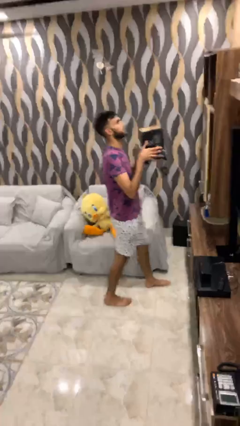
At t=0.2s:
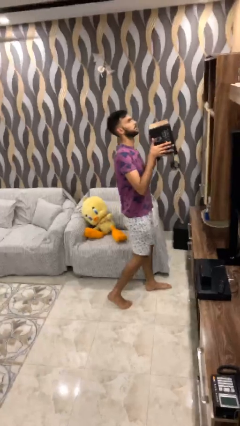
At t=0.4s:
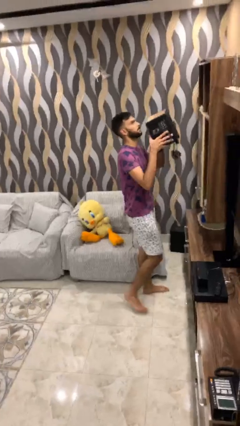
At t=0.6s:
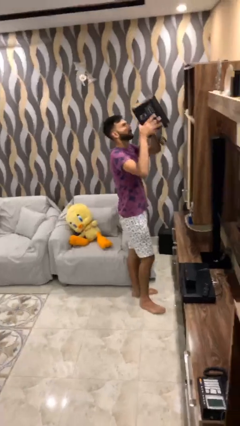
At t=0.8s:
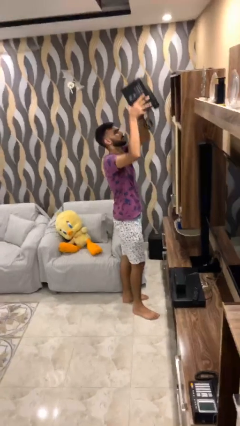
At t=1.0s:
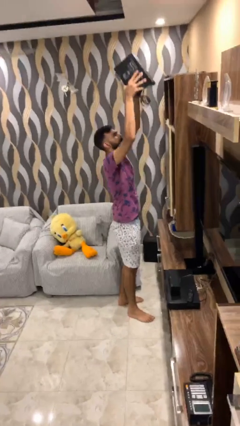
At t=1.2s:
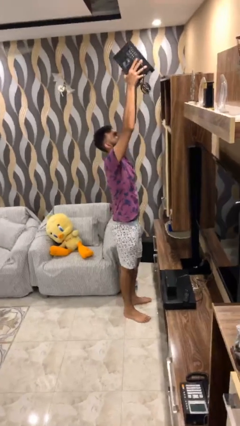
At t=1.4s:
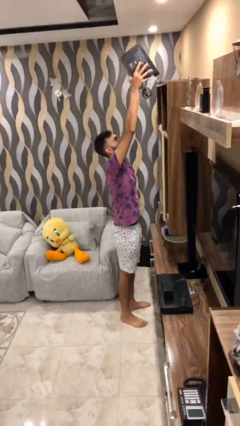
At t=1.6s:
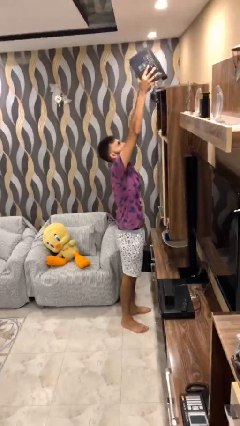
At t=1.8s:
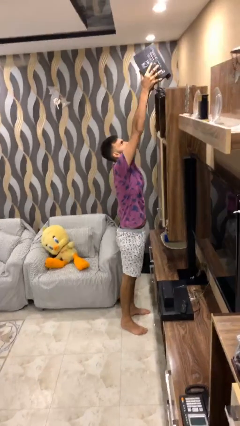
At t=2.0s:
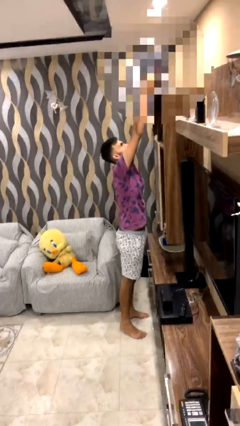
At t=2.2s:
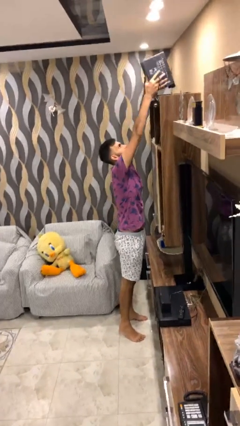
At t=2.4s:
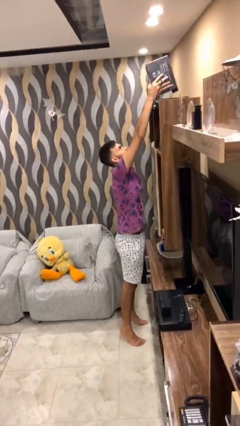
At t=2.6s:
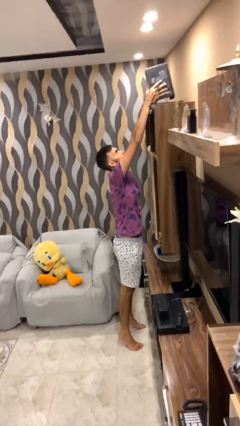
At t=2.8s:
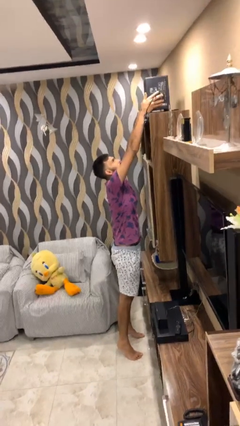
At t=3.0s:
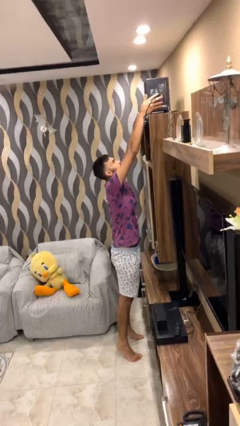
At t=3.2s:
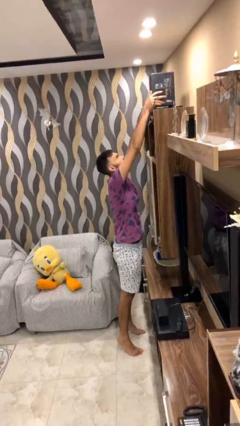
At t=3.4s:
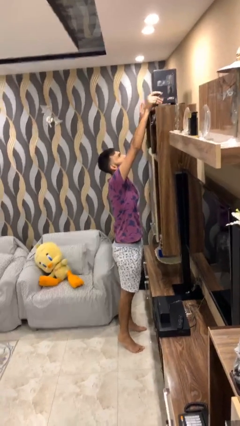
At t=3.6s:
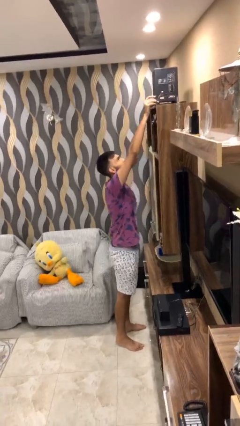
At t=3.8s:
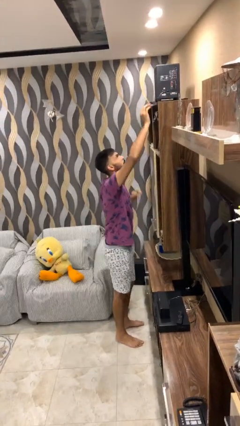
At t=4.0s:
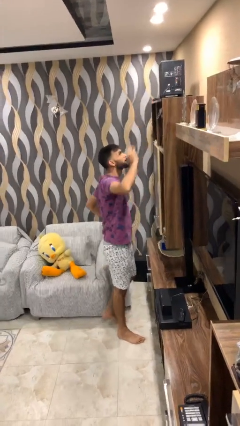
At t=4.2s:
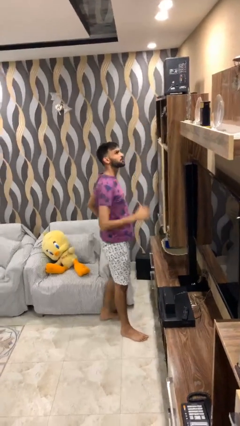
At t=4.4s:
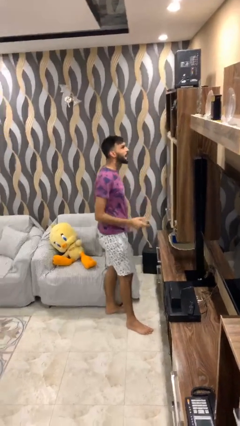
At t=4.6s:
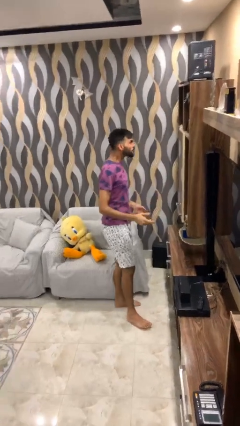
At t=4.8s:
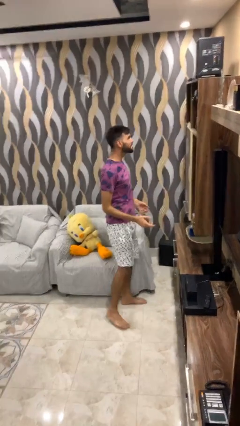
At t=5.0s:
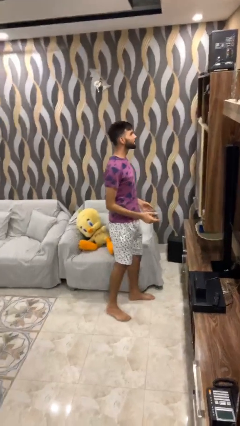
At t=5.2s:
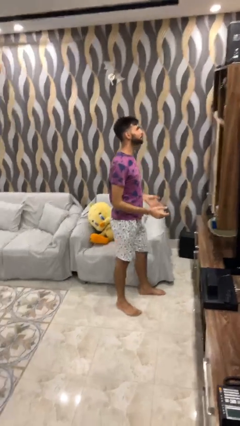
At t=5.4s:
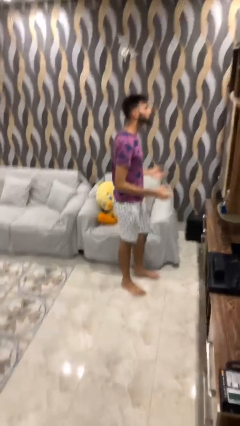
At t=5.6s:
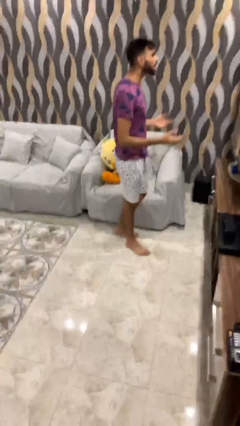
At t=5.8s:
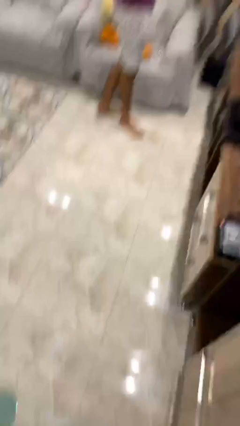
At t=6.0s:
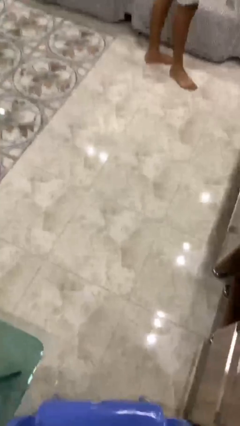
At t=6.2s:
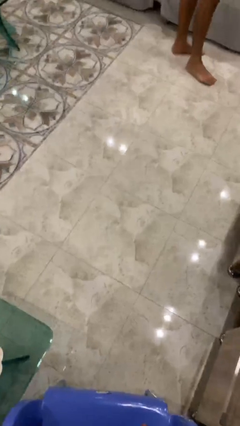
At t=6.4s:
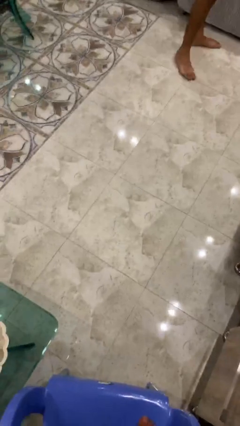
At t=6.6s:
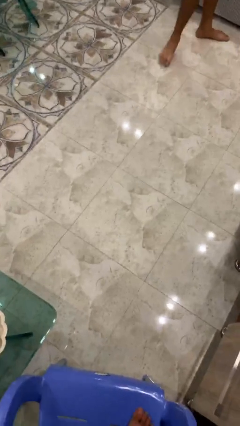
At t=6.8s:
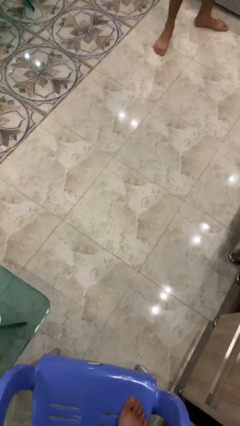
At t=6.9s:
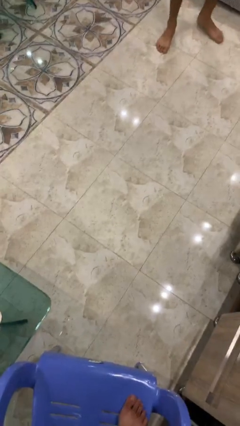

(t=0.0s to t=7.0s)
person puts down object on shelf

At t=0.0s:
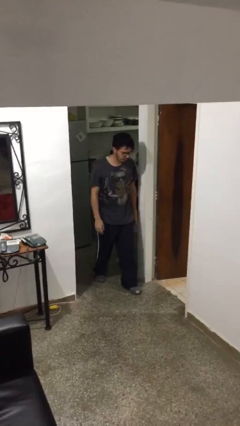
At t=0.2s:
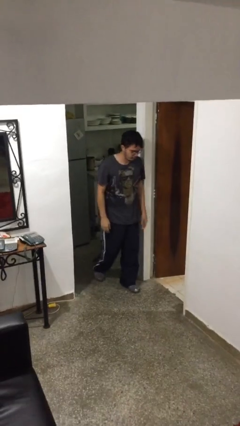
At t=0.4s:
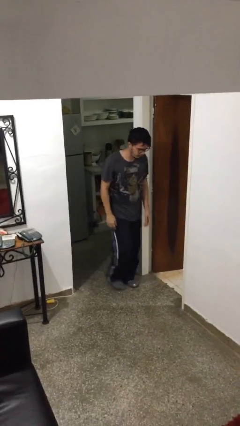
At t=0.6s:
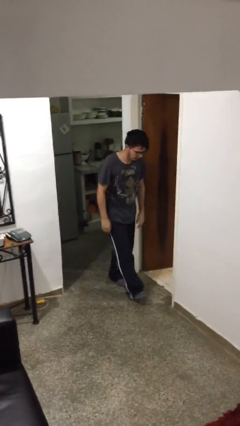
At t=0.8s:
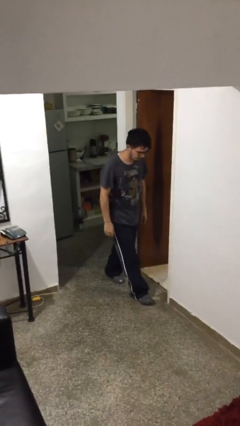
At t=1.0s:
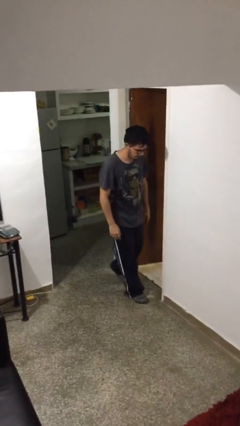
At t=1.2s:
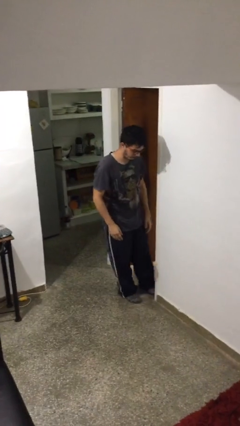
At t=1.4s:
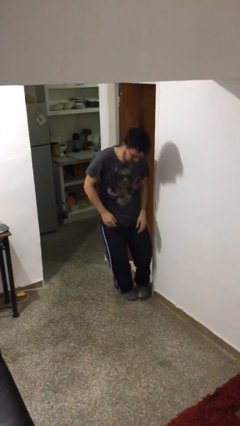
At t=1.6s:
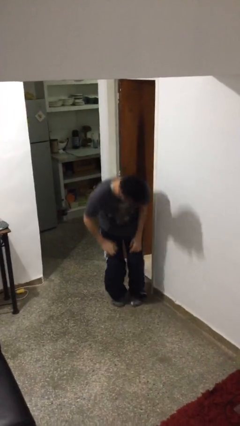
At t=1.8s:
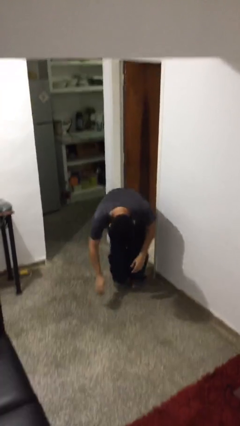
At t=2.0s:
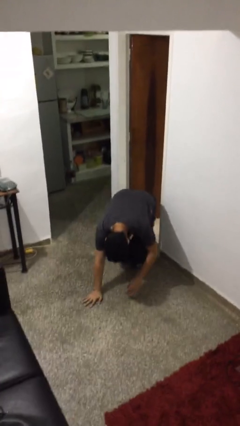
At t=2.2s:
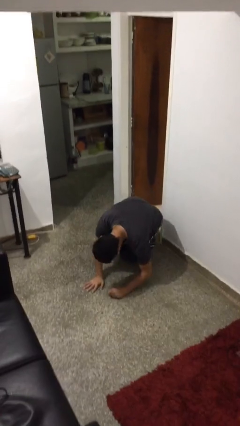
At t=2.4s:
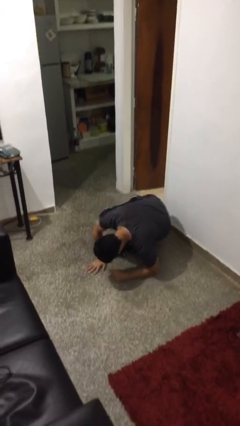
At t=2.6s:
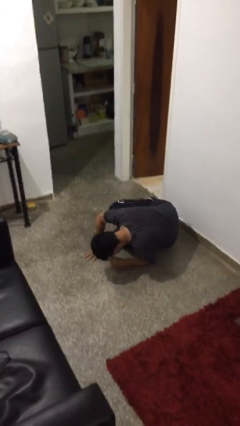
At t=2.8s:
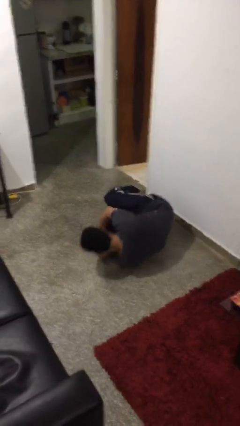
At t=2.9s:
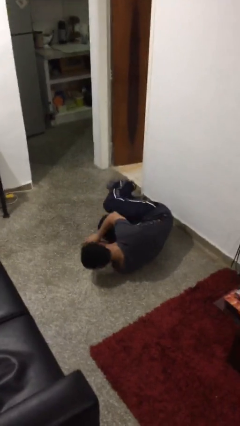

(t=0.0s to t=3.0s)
person trips on object on floor

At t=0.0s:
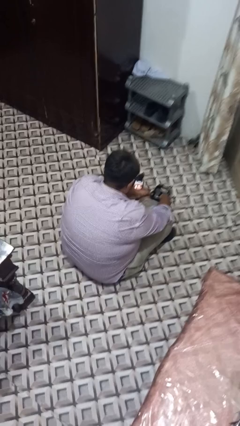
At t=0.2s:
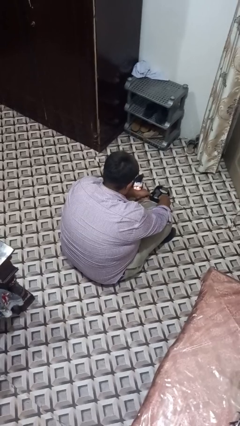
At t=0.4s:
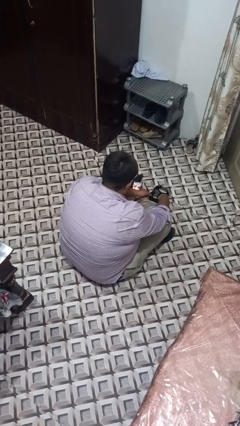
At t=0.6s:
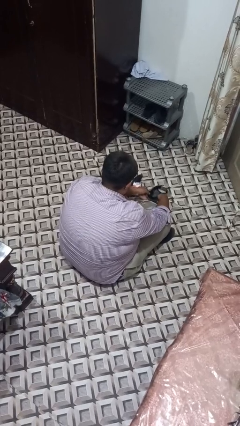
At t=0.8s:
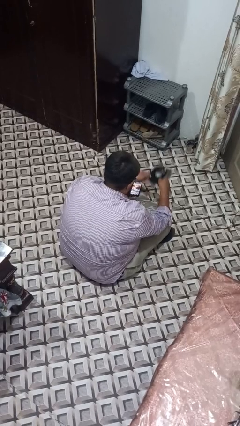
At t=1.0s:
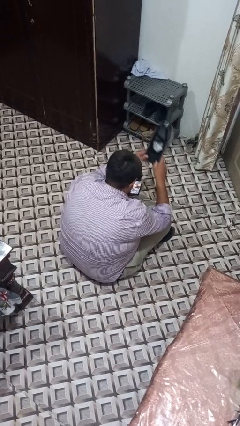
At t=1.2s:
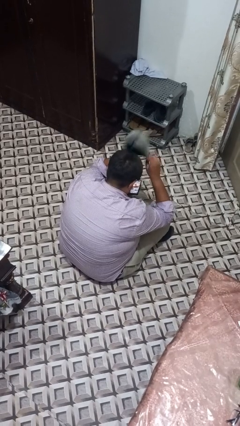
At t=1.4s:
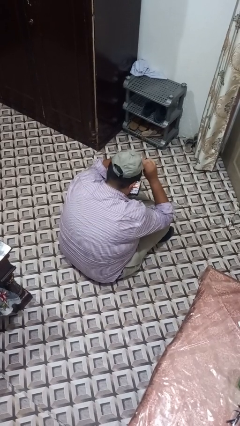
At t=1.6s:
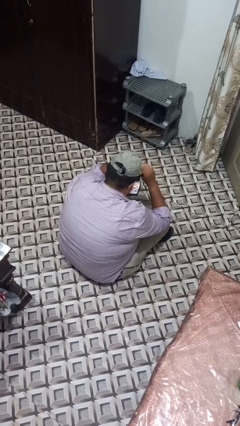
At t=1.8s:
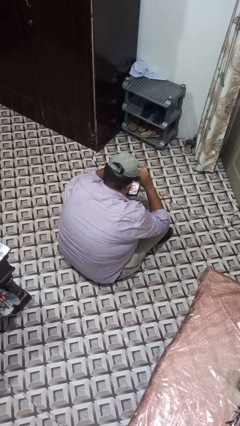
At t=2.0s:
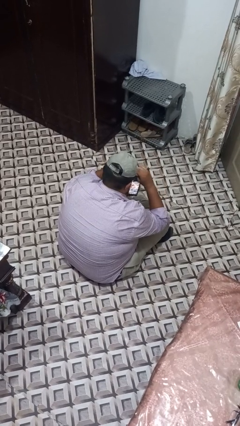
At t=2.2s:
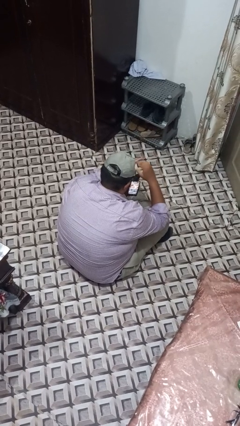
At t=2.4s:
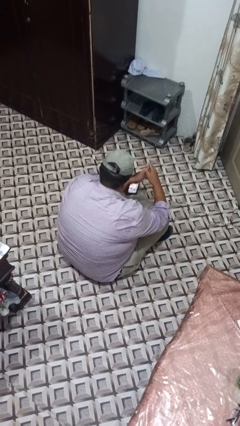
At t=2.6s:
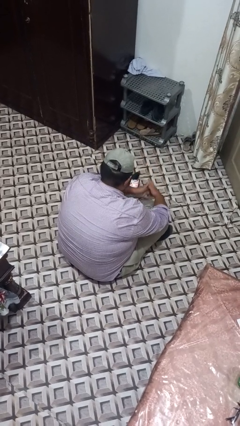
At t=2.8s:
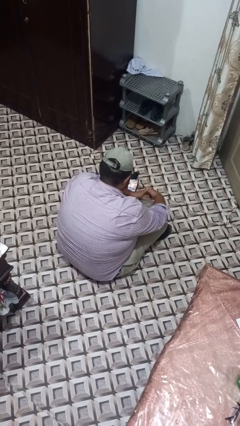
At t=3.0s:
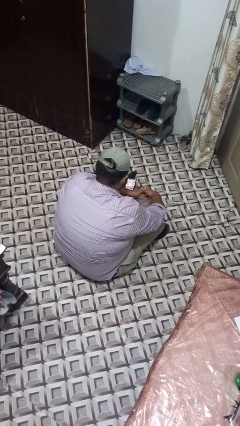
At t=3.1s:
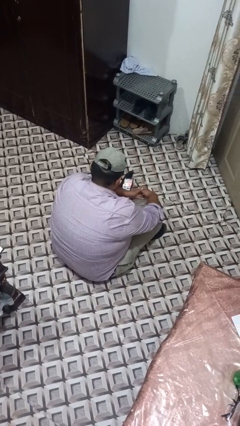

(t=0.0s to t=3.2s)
person puts on hat

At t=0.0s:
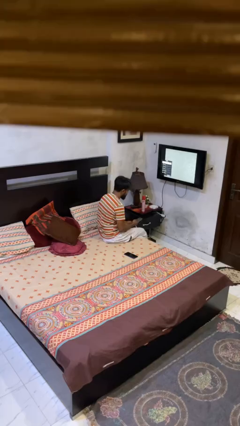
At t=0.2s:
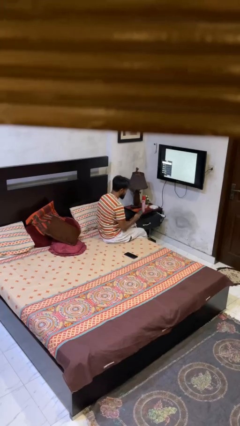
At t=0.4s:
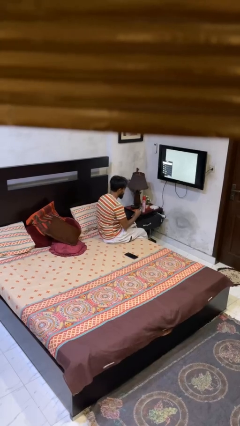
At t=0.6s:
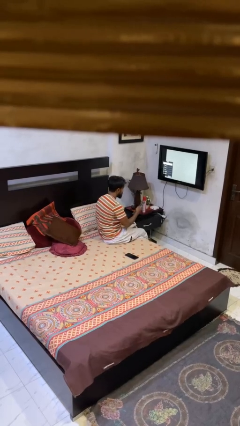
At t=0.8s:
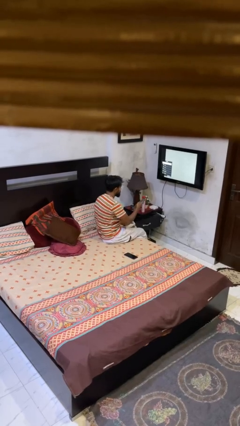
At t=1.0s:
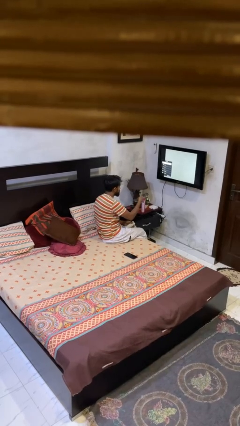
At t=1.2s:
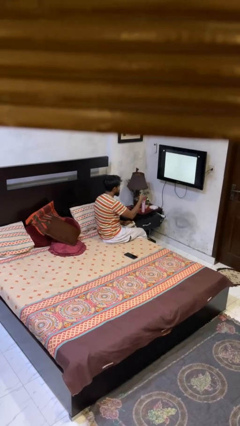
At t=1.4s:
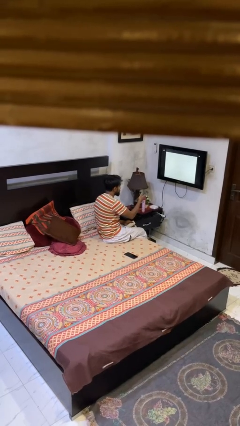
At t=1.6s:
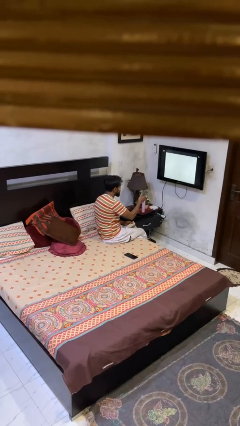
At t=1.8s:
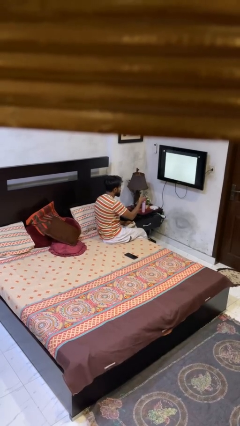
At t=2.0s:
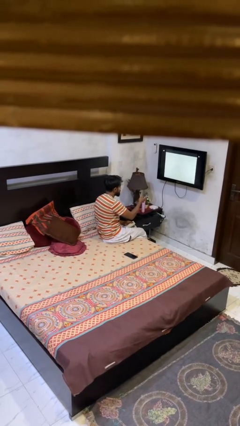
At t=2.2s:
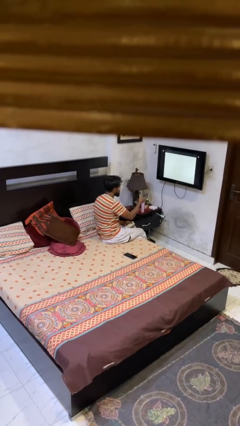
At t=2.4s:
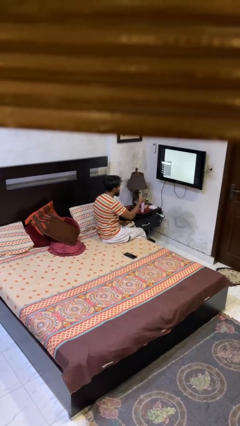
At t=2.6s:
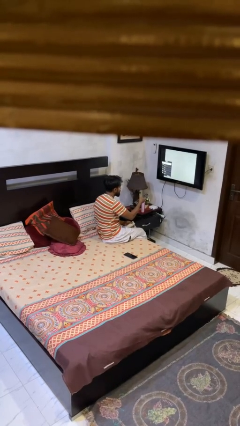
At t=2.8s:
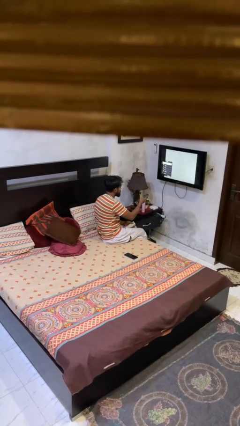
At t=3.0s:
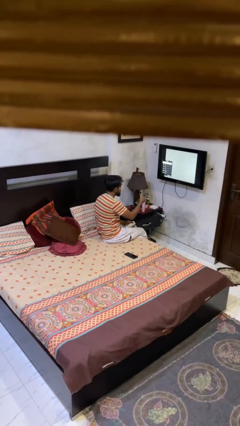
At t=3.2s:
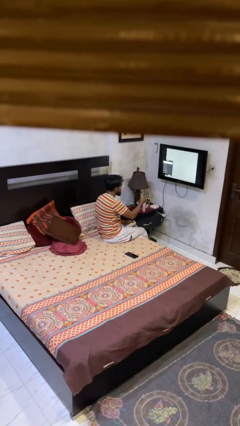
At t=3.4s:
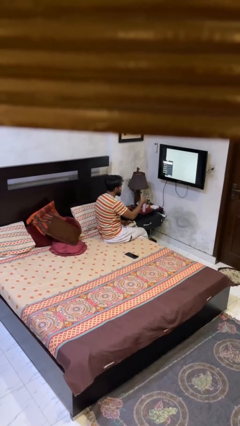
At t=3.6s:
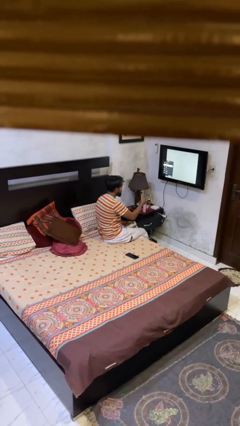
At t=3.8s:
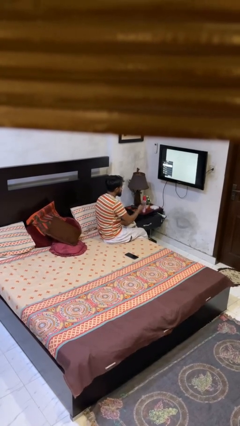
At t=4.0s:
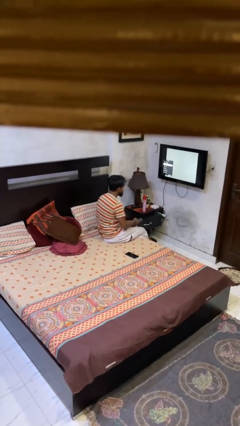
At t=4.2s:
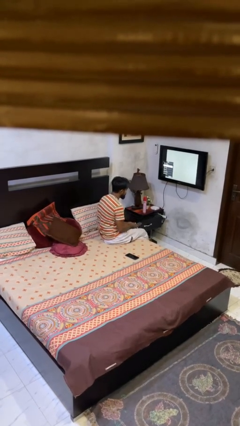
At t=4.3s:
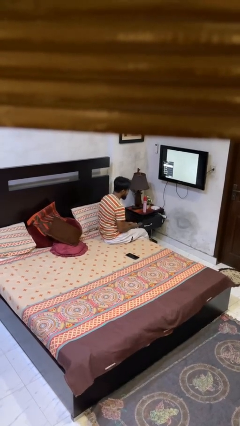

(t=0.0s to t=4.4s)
person uses television remote
